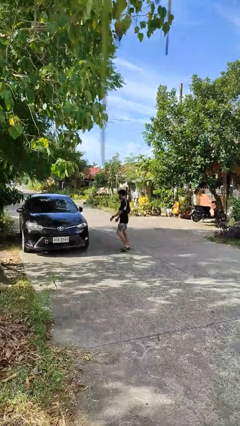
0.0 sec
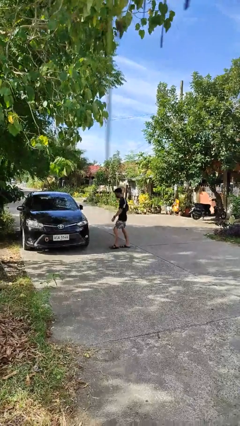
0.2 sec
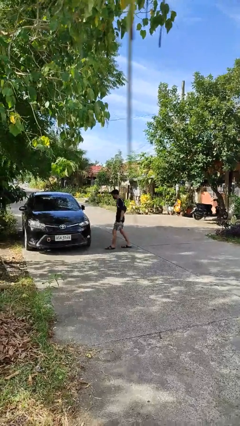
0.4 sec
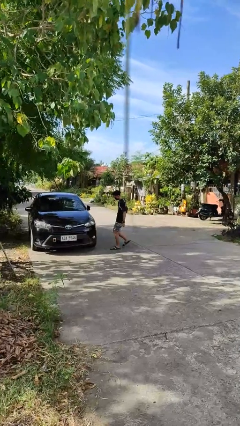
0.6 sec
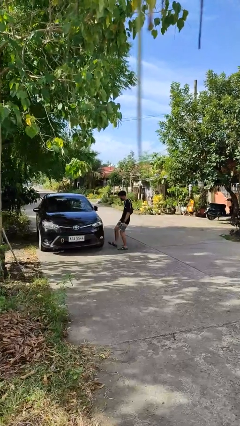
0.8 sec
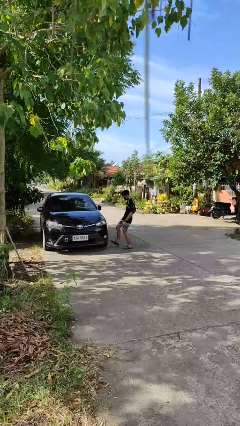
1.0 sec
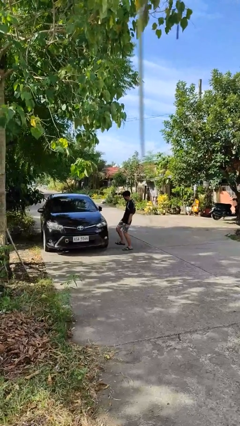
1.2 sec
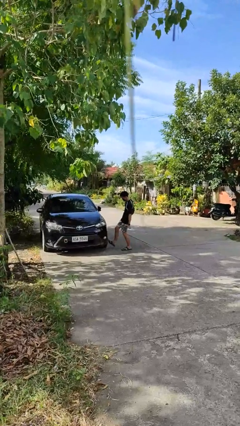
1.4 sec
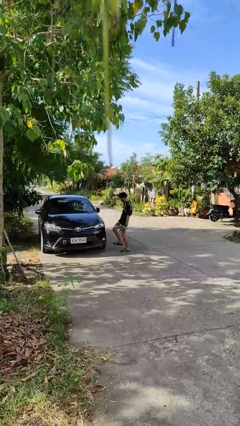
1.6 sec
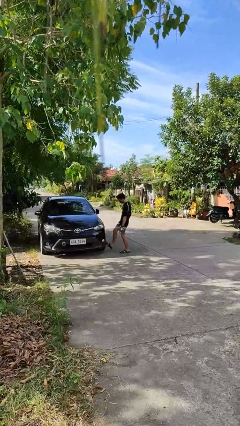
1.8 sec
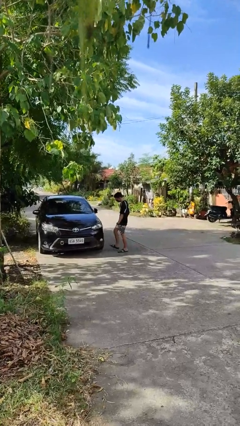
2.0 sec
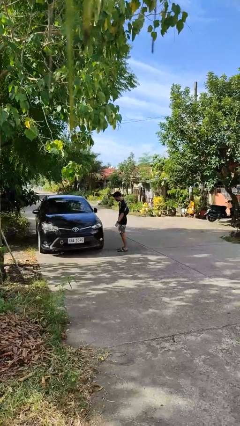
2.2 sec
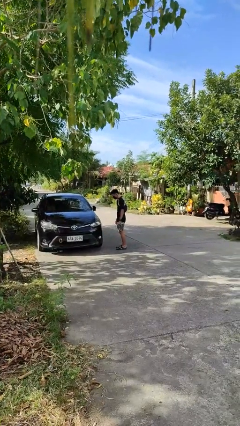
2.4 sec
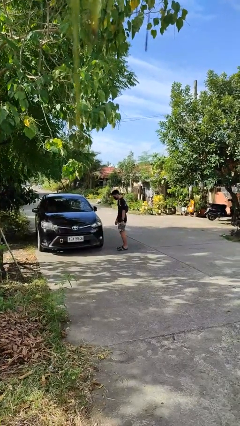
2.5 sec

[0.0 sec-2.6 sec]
person kicks car tires

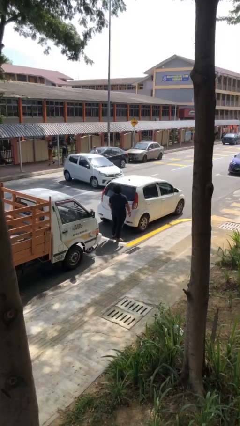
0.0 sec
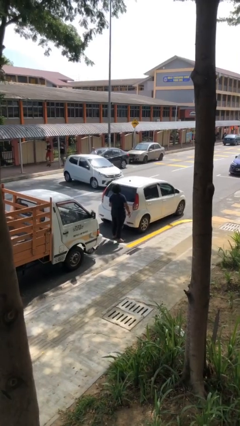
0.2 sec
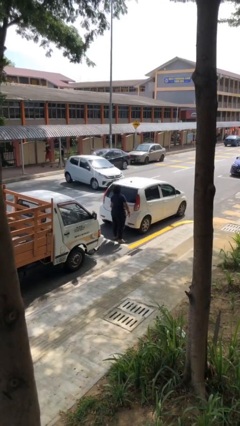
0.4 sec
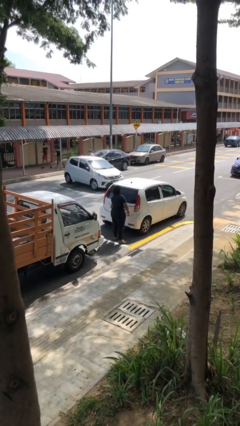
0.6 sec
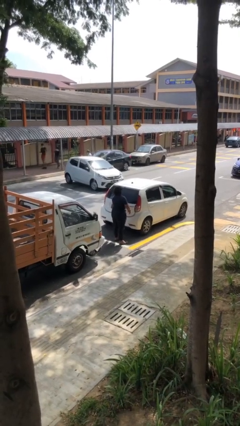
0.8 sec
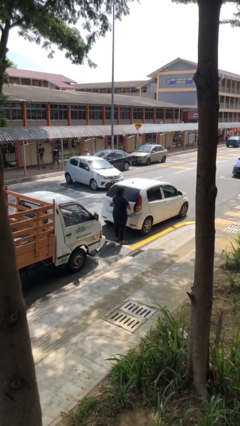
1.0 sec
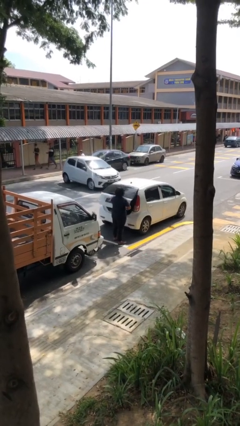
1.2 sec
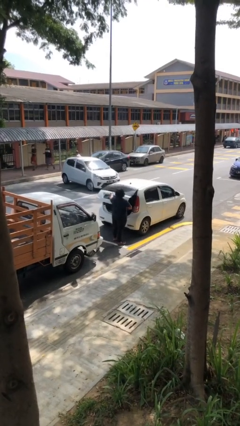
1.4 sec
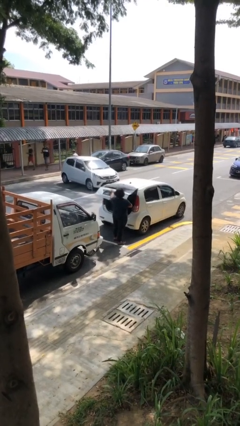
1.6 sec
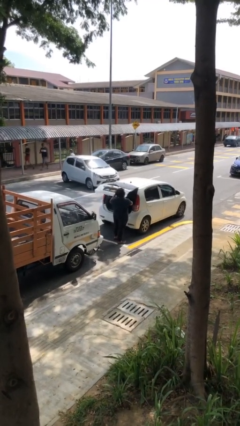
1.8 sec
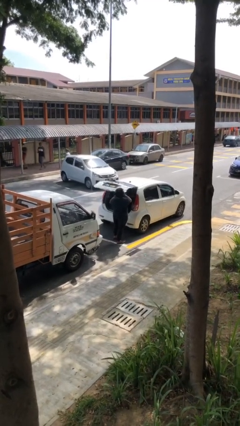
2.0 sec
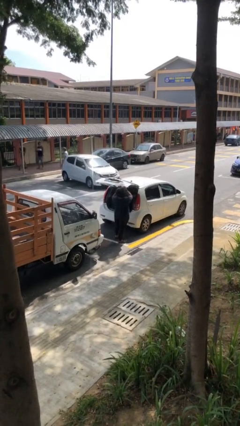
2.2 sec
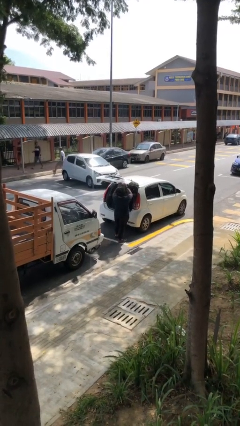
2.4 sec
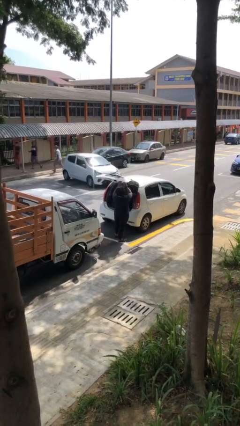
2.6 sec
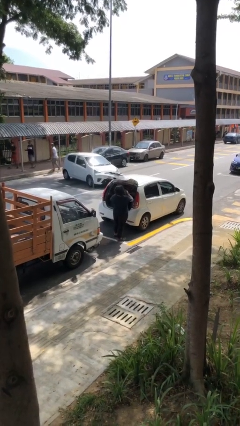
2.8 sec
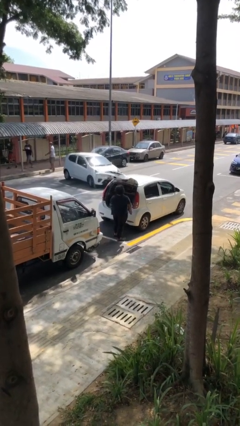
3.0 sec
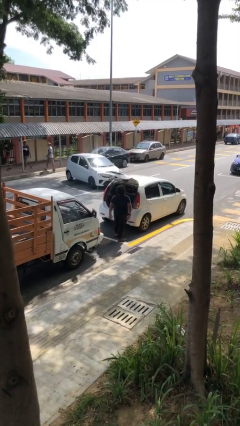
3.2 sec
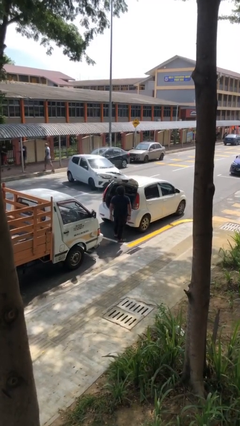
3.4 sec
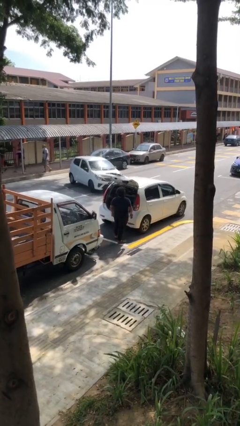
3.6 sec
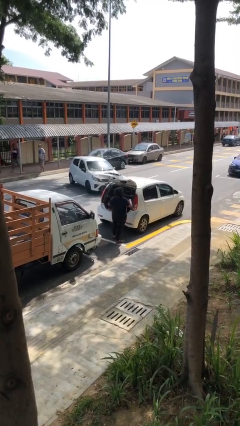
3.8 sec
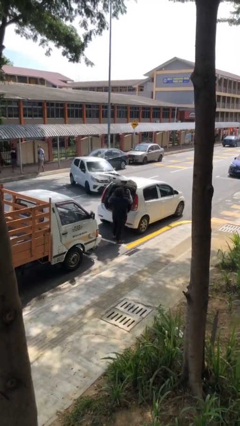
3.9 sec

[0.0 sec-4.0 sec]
person opens car trunk

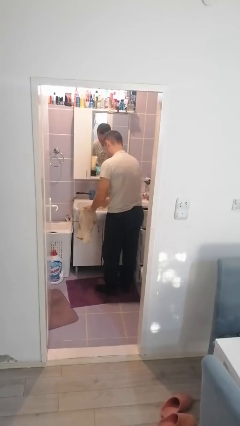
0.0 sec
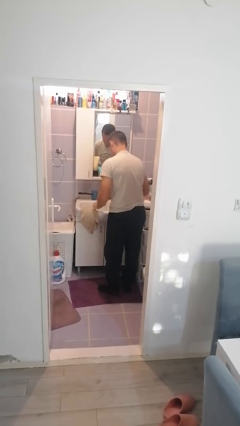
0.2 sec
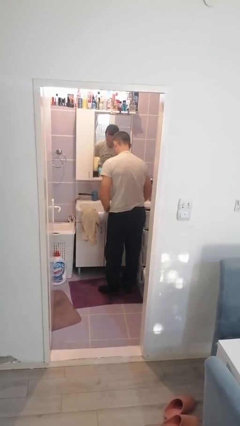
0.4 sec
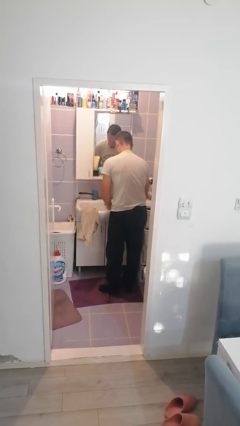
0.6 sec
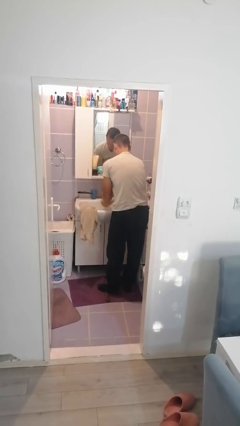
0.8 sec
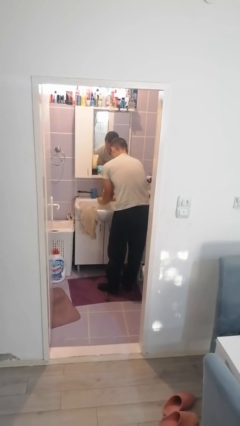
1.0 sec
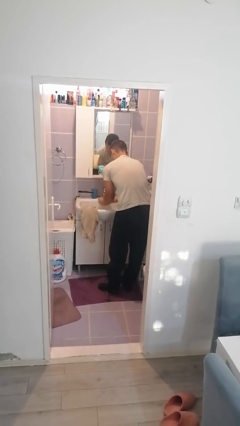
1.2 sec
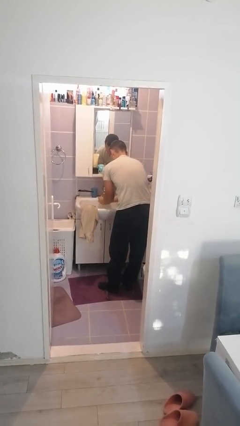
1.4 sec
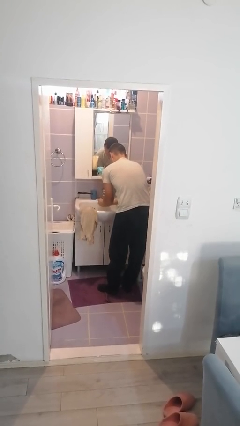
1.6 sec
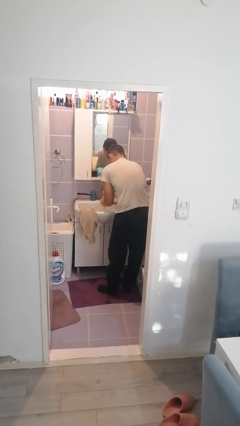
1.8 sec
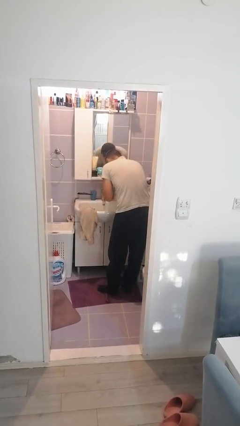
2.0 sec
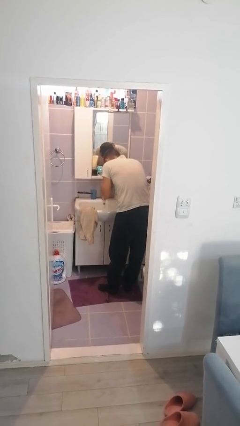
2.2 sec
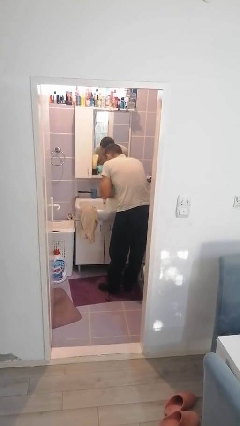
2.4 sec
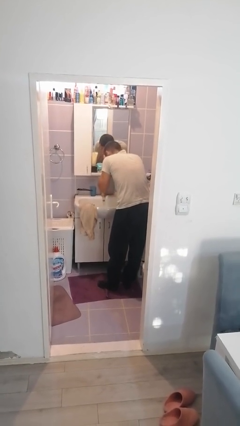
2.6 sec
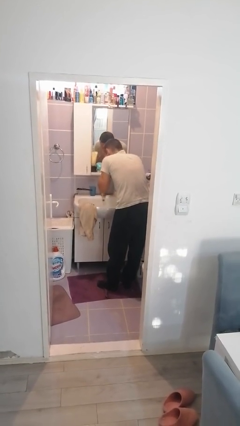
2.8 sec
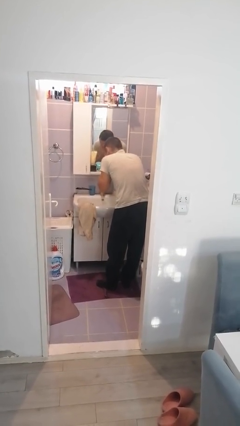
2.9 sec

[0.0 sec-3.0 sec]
person washes face

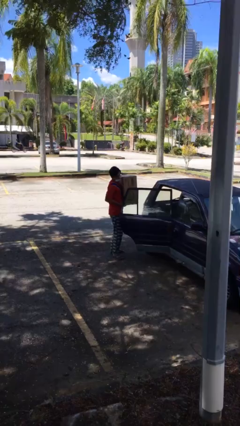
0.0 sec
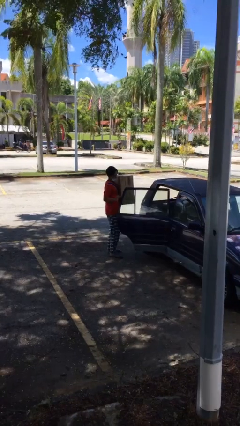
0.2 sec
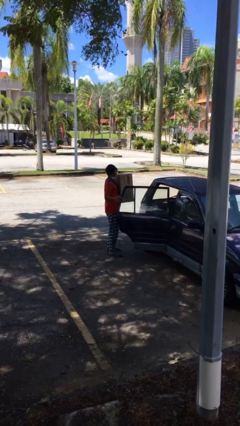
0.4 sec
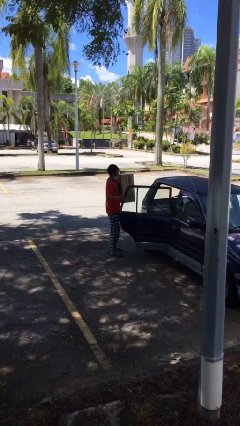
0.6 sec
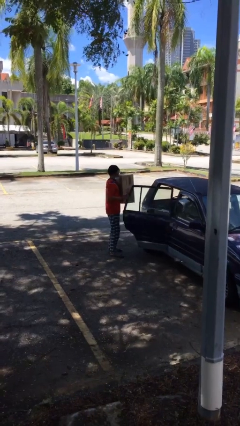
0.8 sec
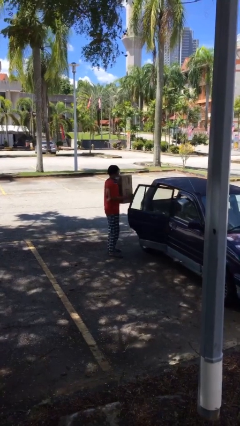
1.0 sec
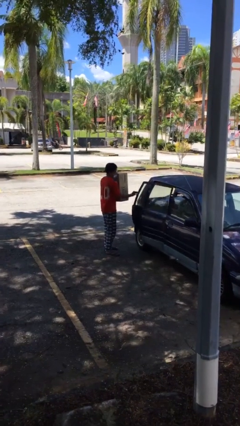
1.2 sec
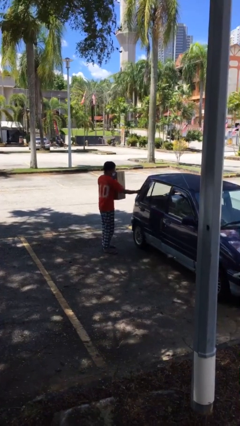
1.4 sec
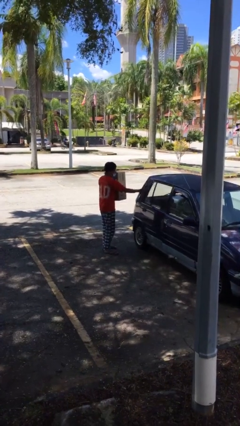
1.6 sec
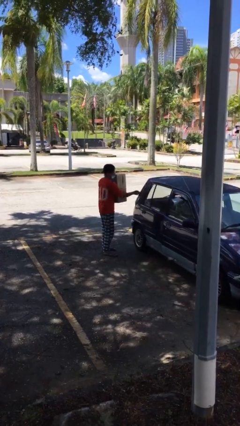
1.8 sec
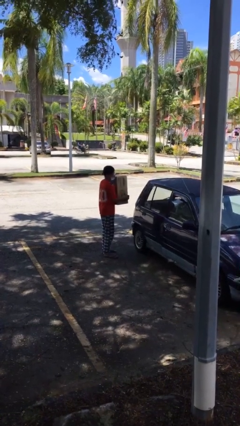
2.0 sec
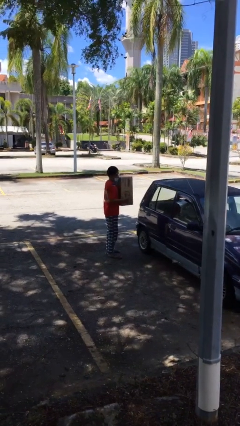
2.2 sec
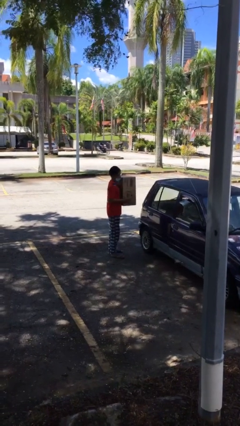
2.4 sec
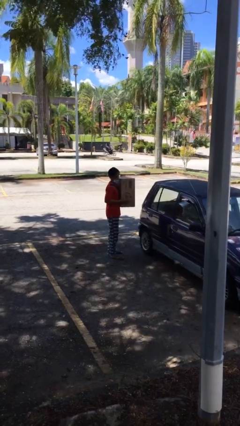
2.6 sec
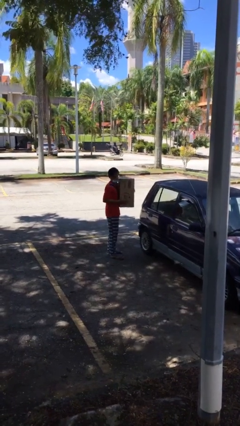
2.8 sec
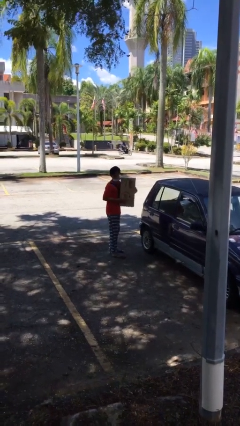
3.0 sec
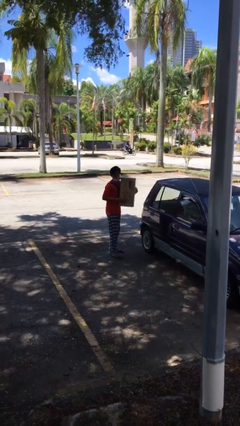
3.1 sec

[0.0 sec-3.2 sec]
person closes car door

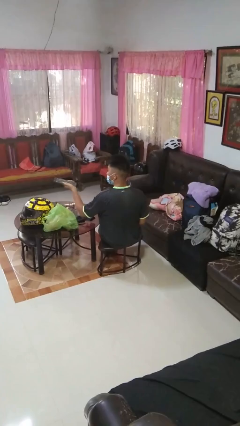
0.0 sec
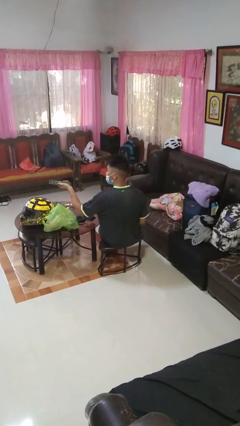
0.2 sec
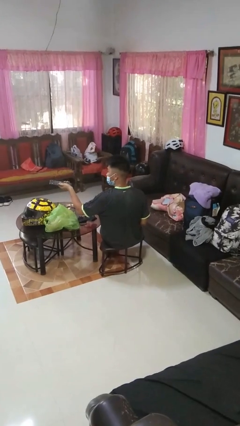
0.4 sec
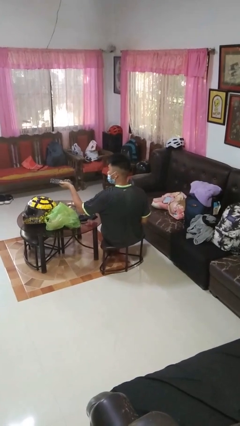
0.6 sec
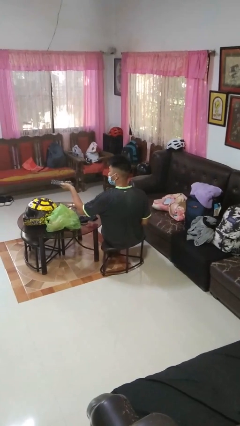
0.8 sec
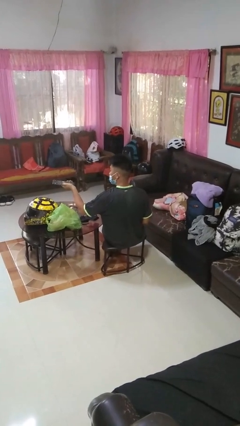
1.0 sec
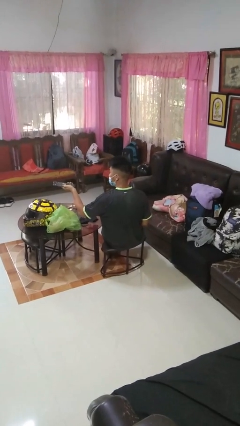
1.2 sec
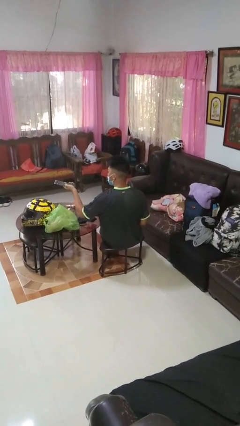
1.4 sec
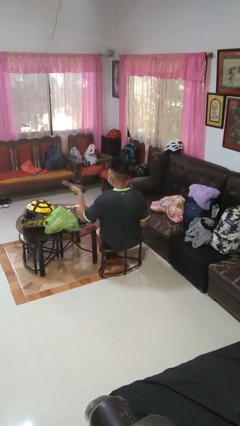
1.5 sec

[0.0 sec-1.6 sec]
person uses television remote

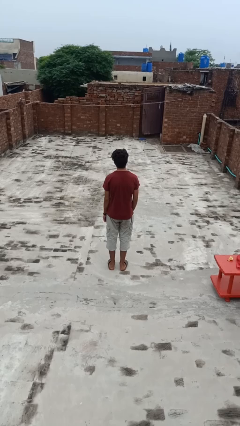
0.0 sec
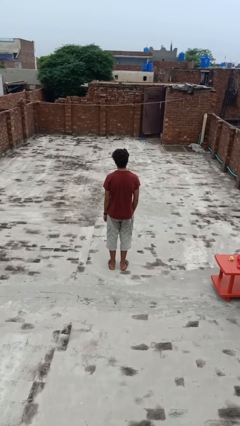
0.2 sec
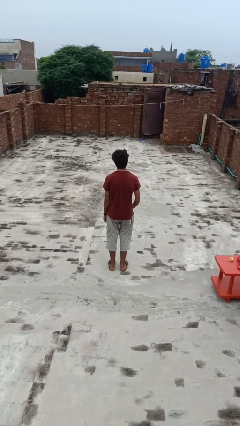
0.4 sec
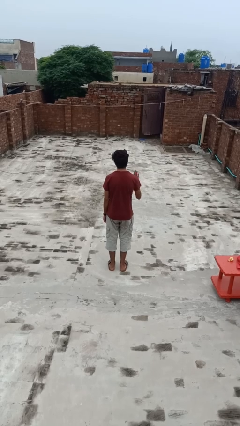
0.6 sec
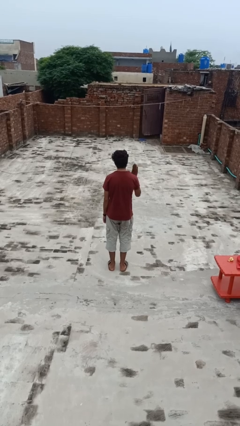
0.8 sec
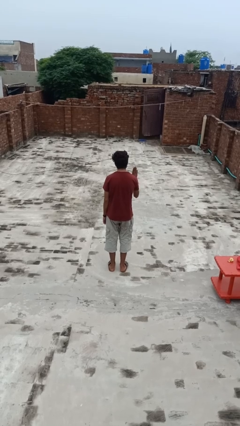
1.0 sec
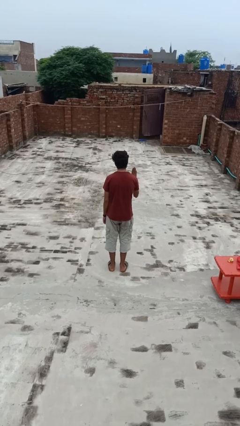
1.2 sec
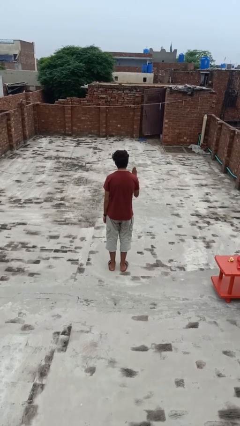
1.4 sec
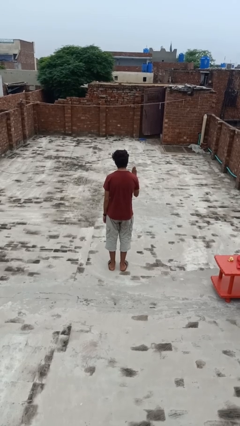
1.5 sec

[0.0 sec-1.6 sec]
person gestures stop

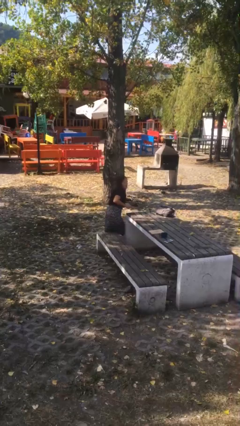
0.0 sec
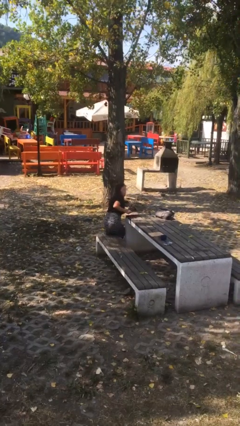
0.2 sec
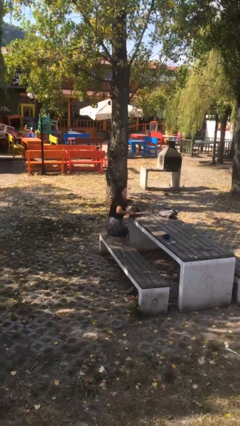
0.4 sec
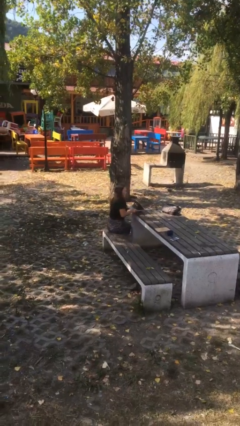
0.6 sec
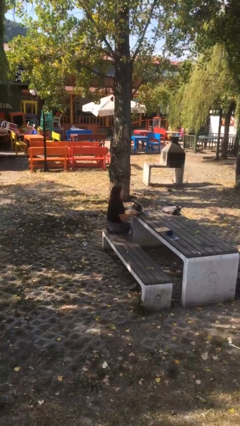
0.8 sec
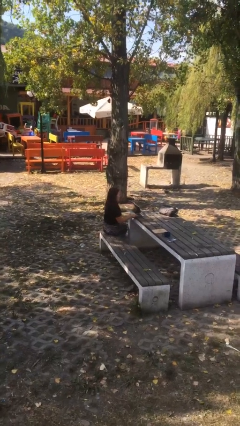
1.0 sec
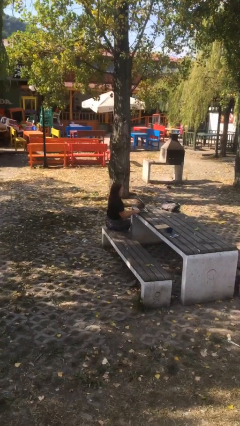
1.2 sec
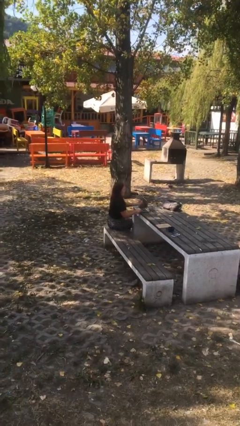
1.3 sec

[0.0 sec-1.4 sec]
person sits down
